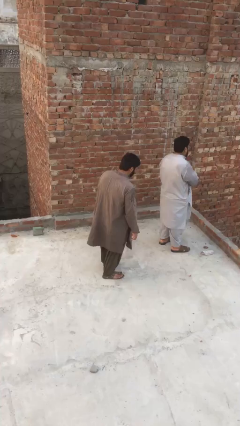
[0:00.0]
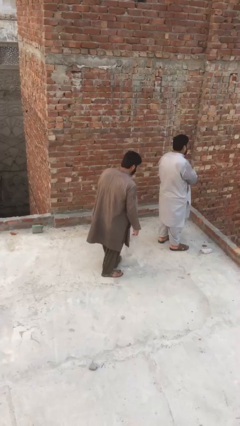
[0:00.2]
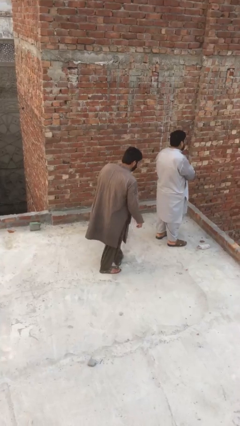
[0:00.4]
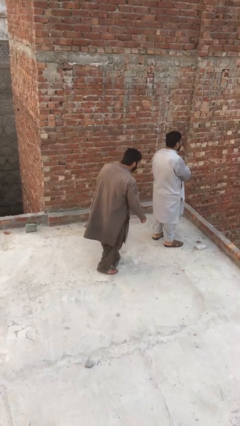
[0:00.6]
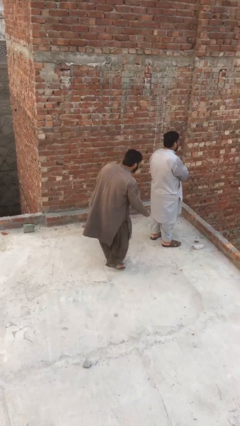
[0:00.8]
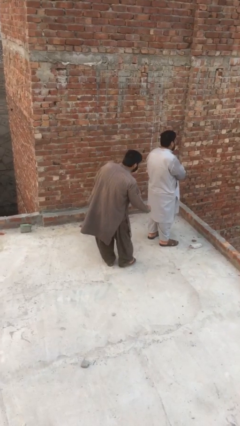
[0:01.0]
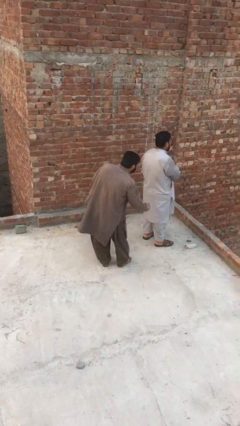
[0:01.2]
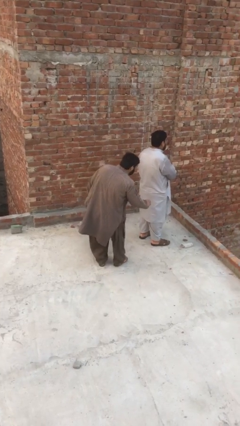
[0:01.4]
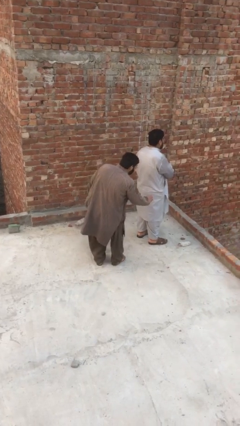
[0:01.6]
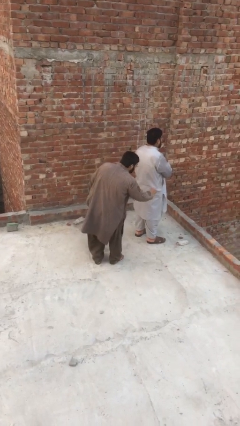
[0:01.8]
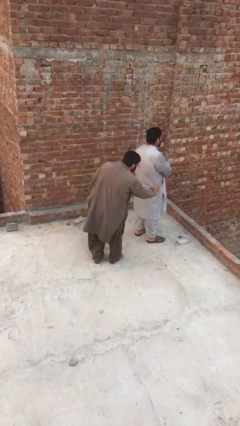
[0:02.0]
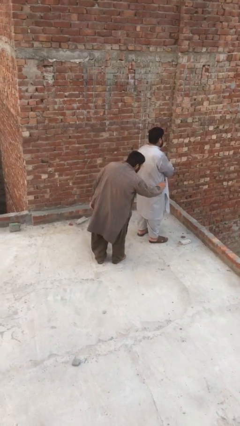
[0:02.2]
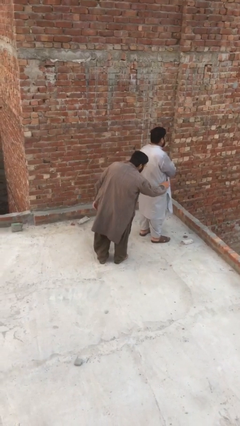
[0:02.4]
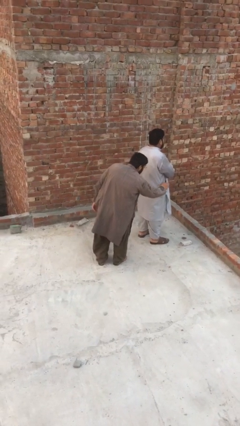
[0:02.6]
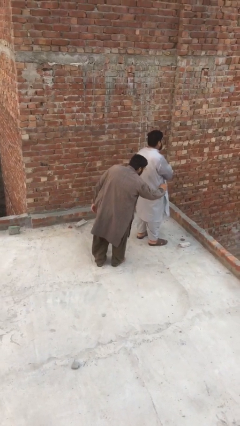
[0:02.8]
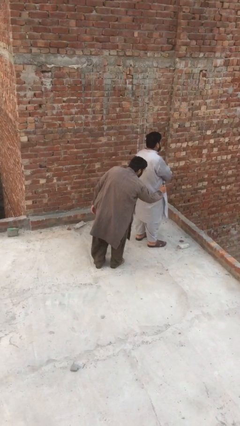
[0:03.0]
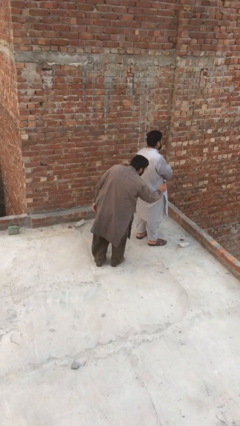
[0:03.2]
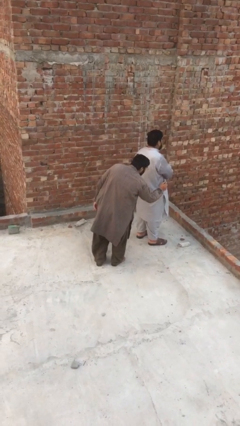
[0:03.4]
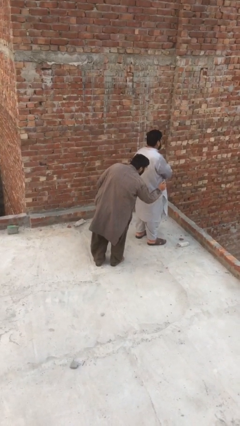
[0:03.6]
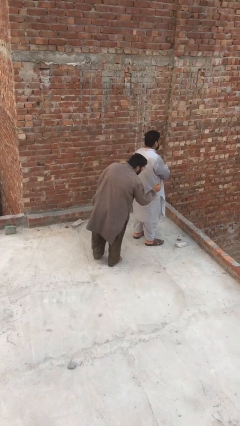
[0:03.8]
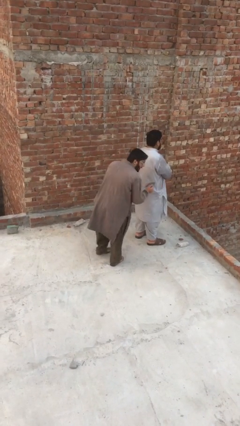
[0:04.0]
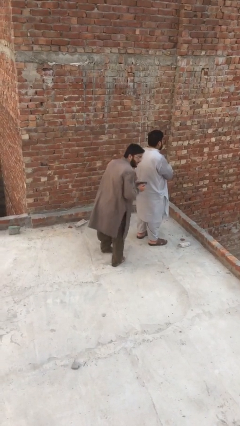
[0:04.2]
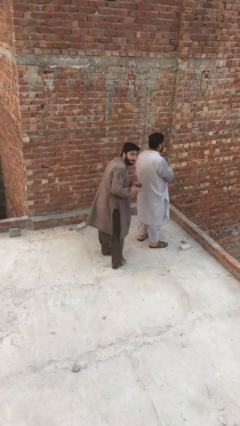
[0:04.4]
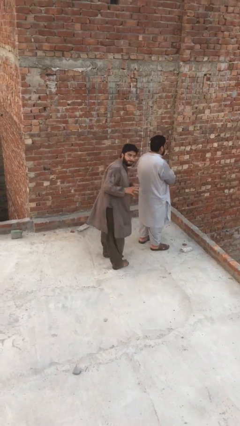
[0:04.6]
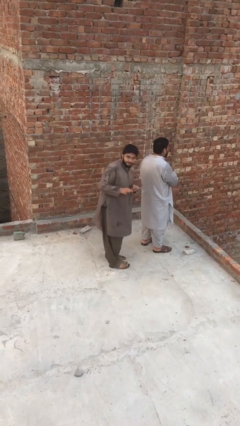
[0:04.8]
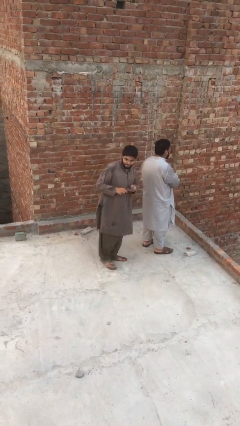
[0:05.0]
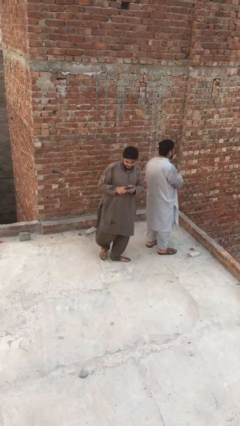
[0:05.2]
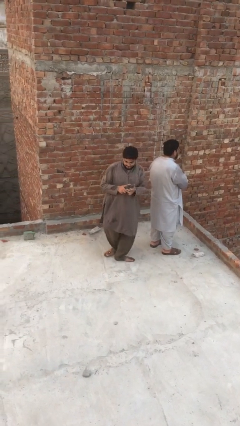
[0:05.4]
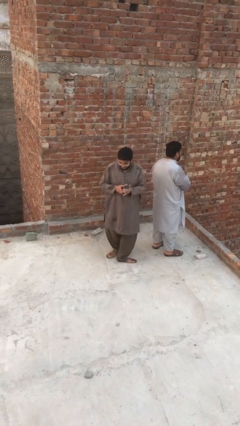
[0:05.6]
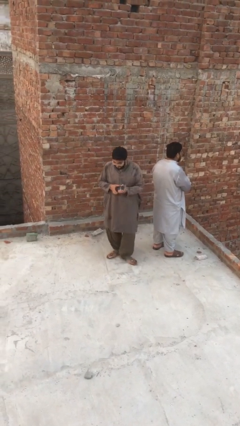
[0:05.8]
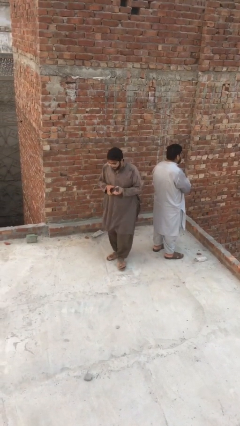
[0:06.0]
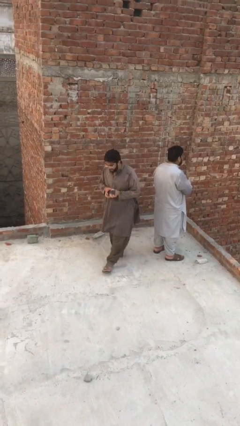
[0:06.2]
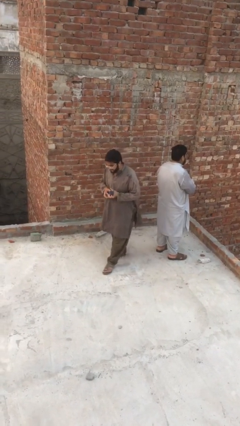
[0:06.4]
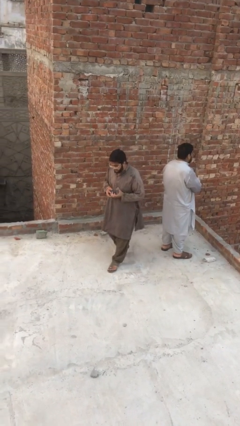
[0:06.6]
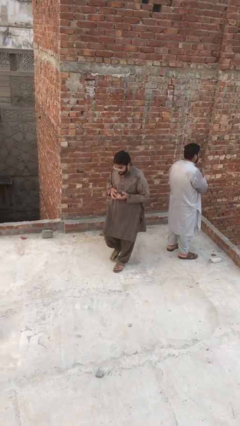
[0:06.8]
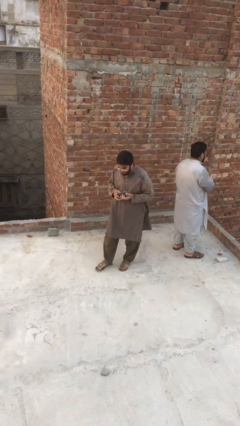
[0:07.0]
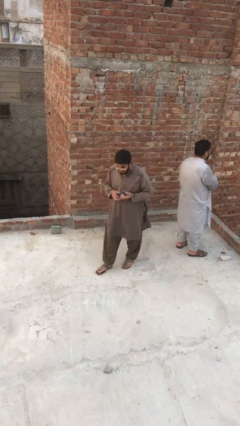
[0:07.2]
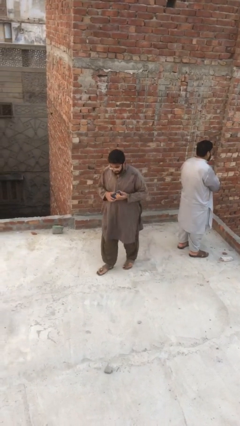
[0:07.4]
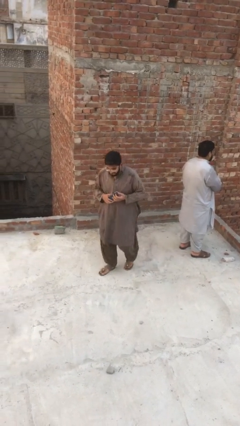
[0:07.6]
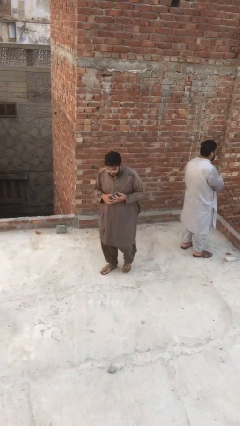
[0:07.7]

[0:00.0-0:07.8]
person steals object from person

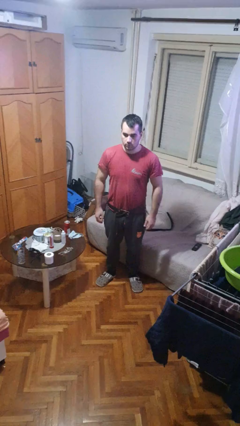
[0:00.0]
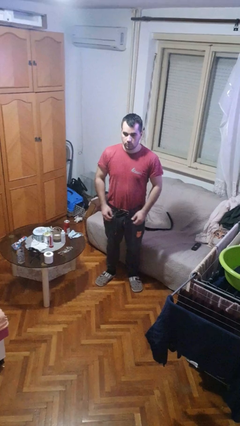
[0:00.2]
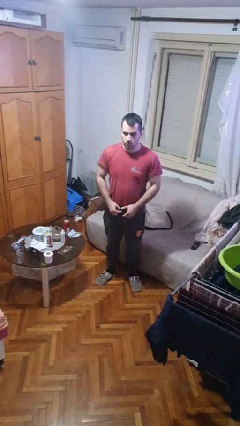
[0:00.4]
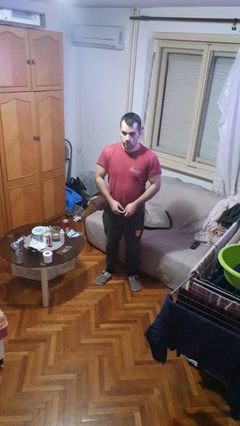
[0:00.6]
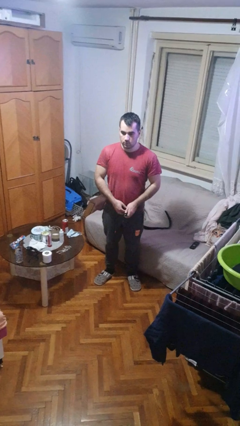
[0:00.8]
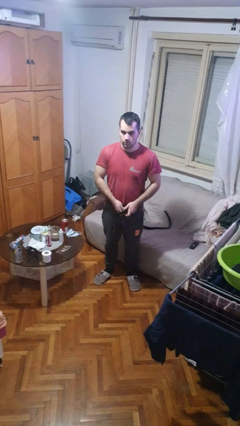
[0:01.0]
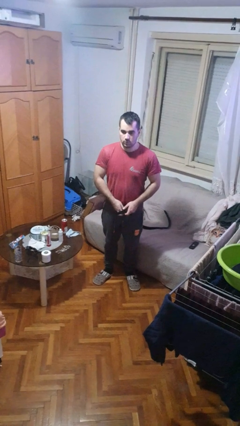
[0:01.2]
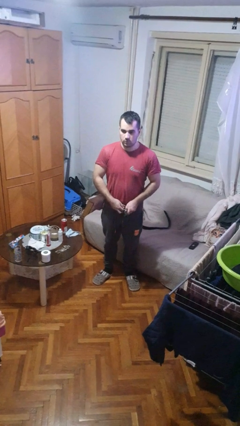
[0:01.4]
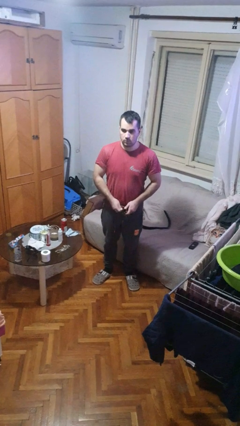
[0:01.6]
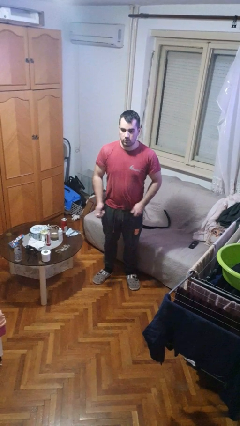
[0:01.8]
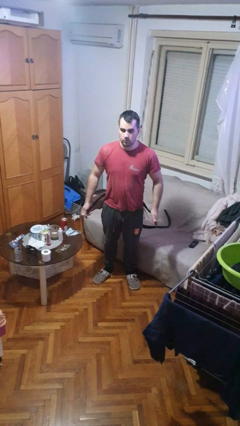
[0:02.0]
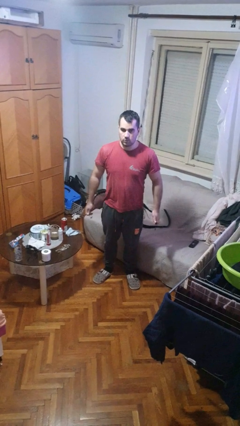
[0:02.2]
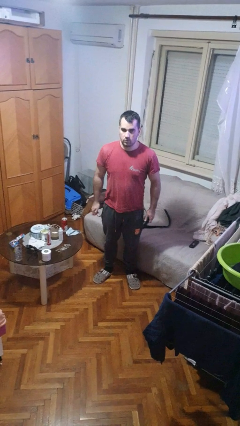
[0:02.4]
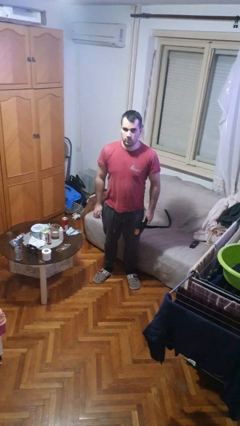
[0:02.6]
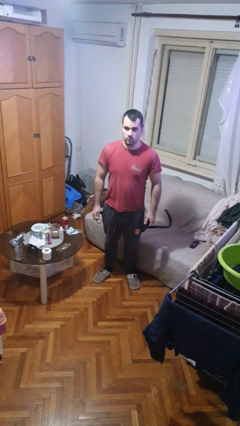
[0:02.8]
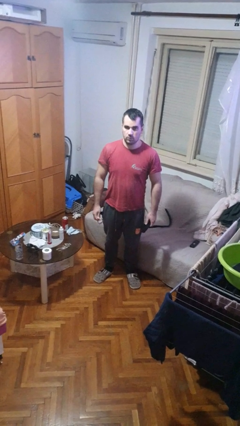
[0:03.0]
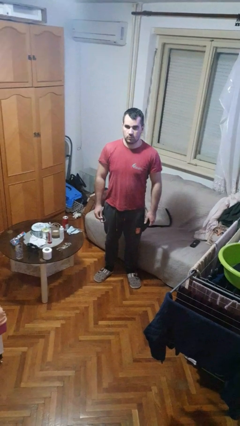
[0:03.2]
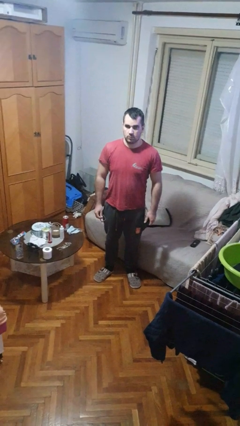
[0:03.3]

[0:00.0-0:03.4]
person takes off belt

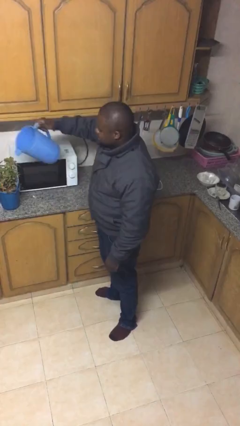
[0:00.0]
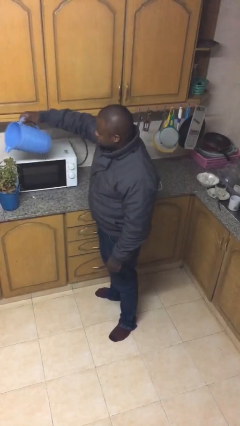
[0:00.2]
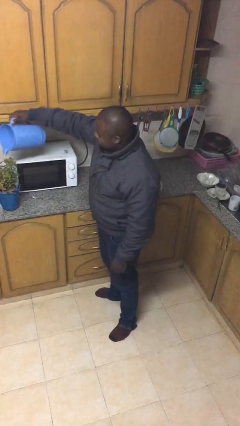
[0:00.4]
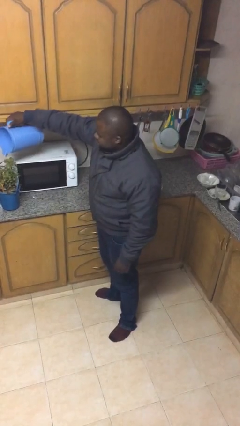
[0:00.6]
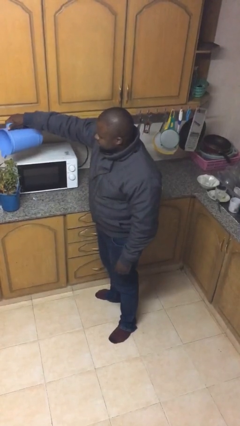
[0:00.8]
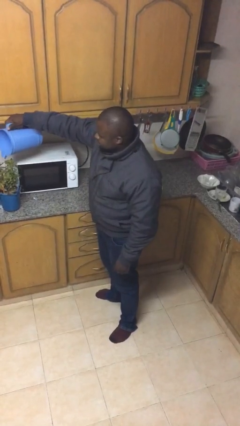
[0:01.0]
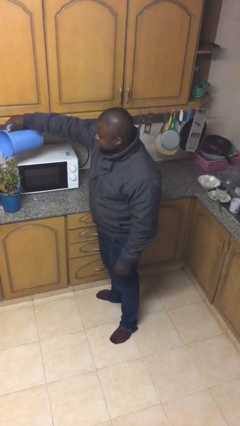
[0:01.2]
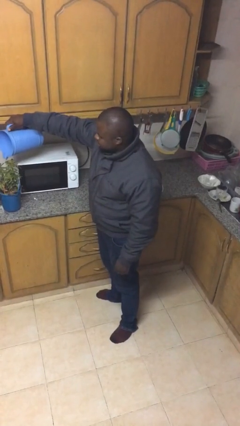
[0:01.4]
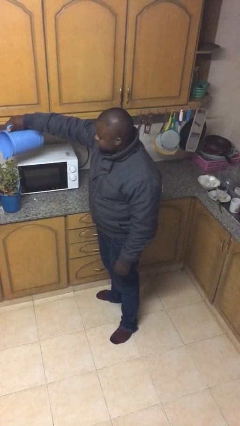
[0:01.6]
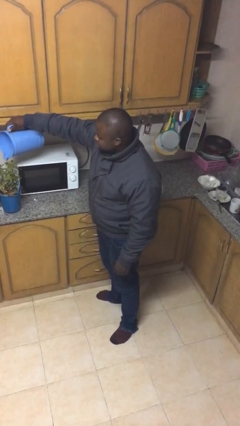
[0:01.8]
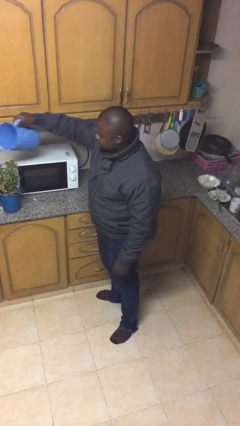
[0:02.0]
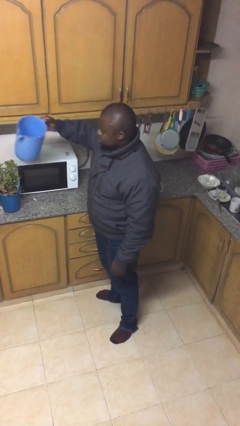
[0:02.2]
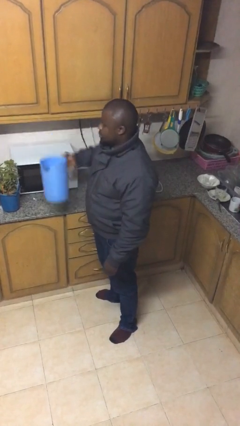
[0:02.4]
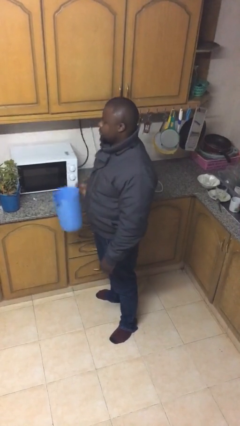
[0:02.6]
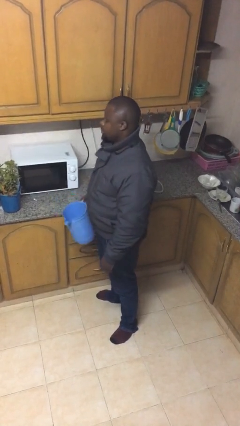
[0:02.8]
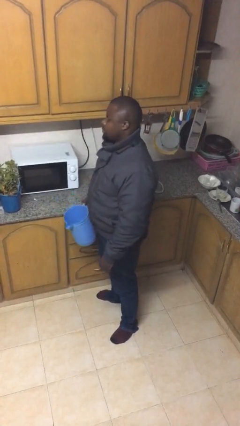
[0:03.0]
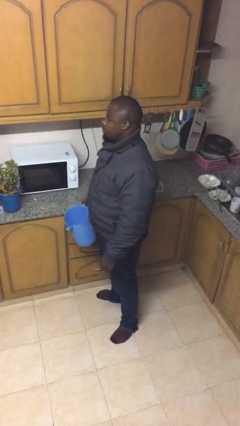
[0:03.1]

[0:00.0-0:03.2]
person waters houseplant

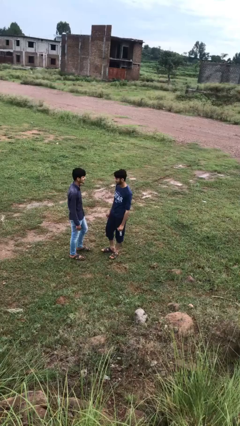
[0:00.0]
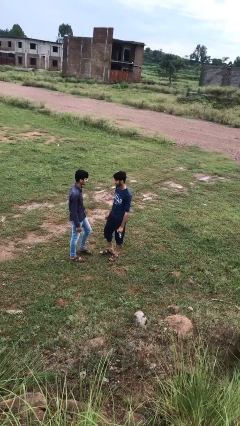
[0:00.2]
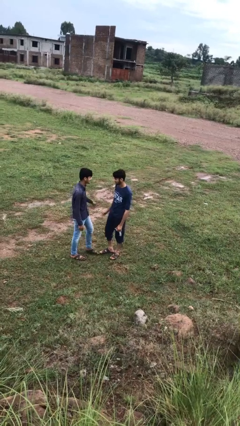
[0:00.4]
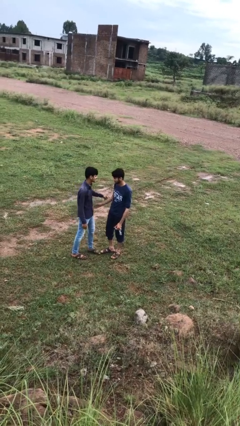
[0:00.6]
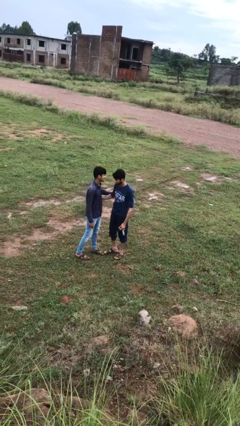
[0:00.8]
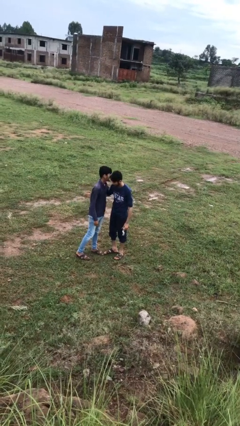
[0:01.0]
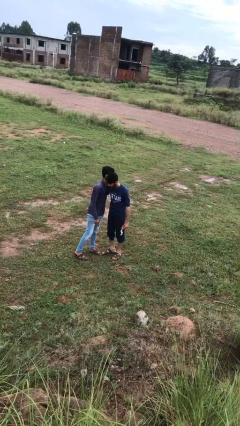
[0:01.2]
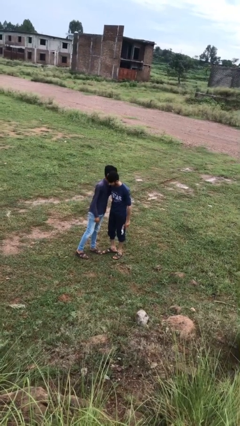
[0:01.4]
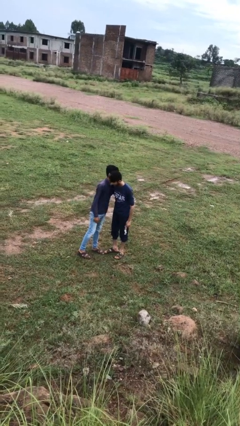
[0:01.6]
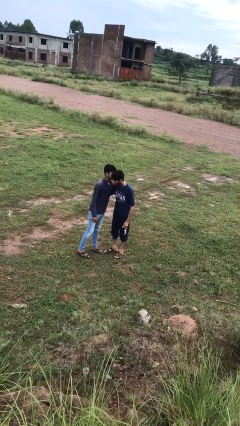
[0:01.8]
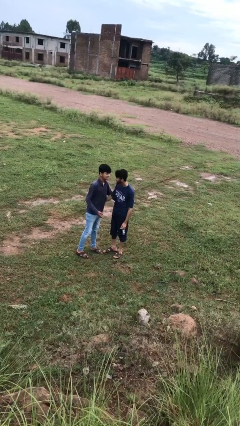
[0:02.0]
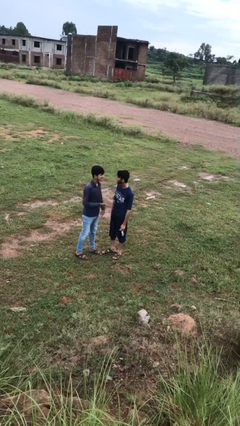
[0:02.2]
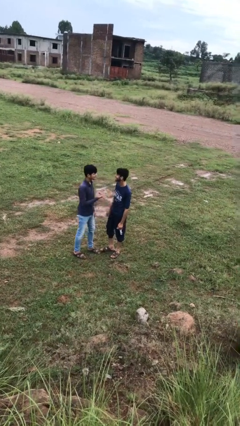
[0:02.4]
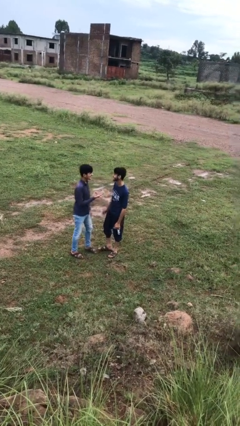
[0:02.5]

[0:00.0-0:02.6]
person embraces person

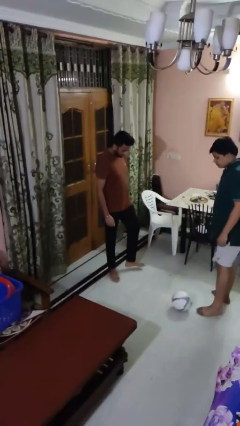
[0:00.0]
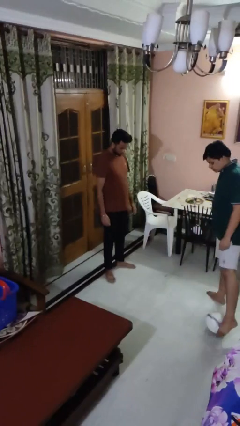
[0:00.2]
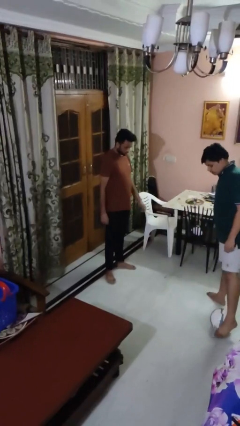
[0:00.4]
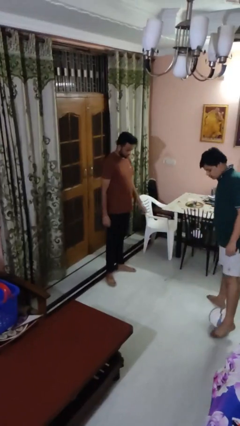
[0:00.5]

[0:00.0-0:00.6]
person kicks object to person

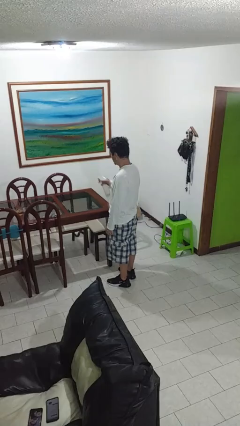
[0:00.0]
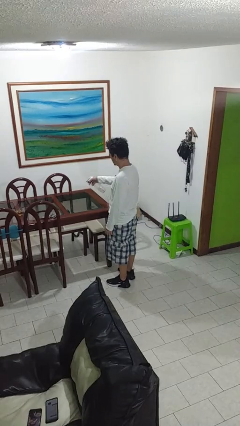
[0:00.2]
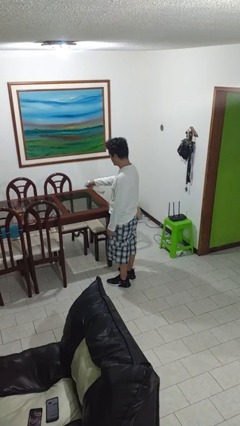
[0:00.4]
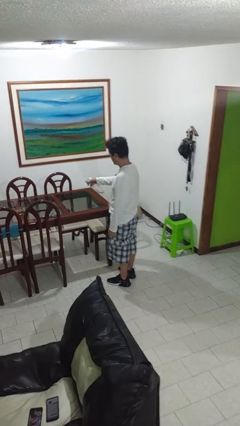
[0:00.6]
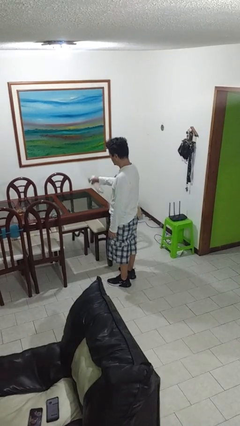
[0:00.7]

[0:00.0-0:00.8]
person sprays from bottle
